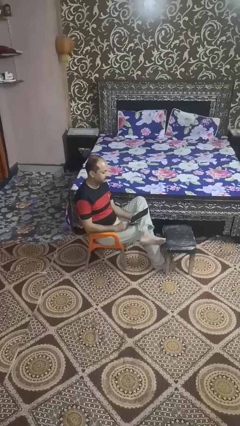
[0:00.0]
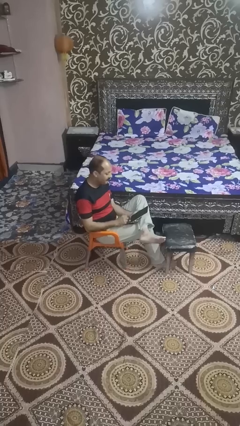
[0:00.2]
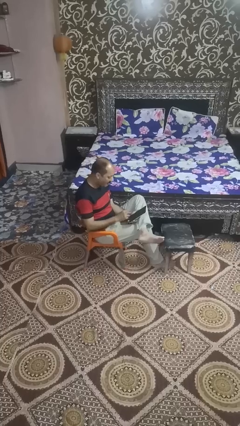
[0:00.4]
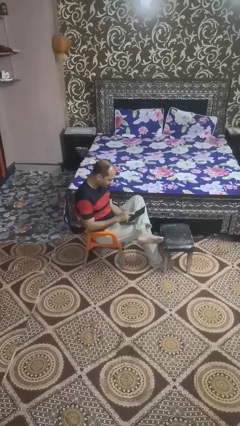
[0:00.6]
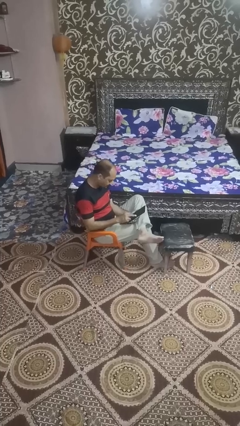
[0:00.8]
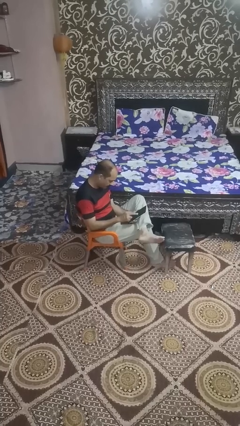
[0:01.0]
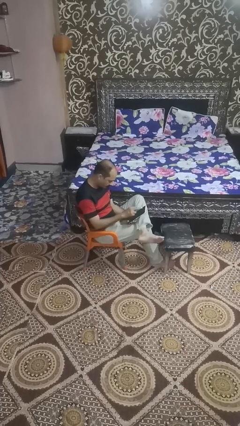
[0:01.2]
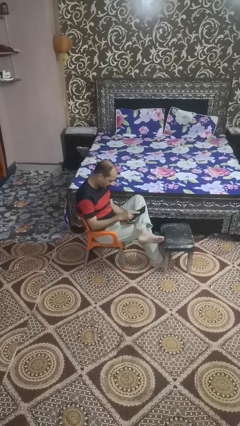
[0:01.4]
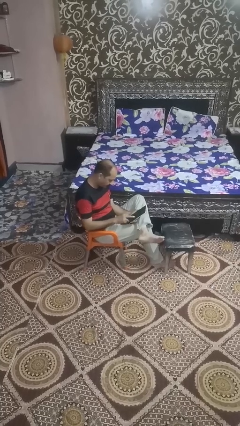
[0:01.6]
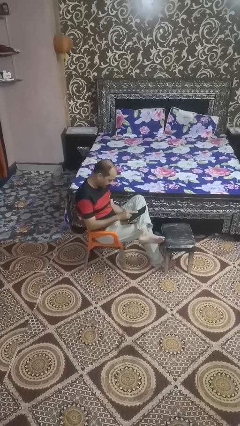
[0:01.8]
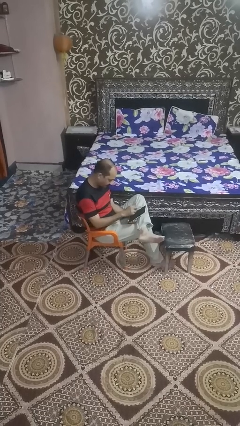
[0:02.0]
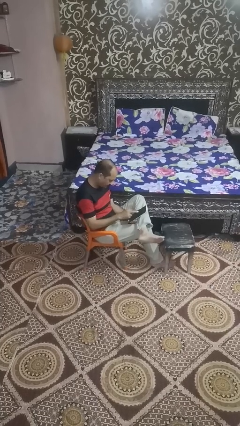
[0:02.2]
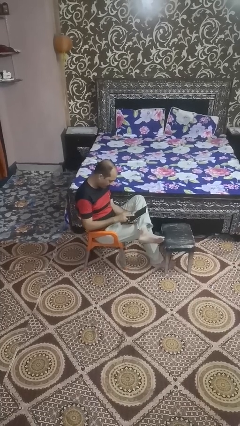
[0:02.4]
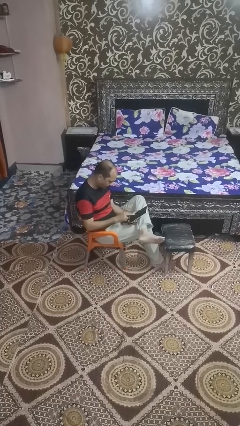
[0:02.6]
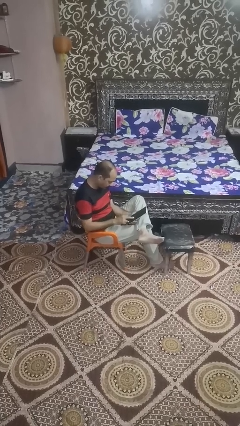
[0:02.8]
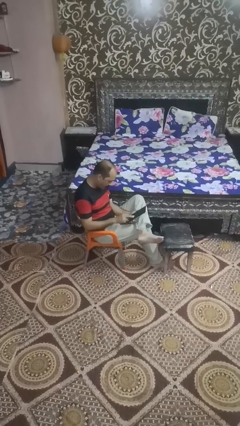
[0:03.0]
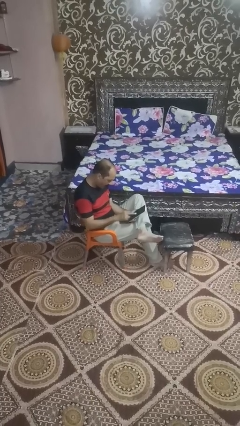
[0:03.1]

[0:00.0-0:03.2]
person interacts with tablet

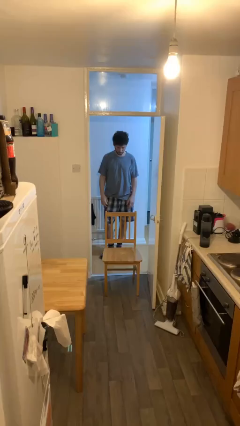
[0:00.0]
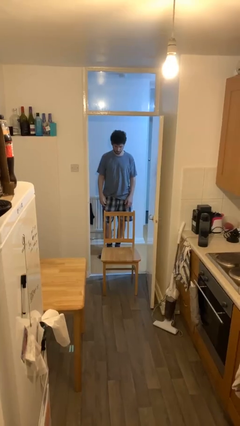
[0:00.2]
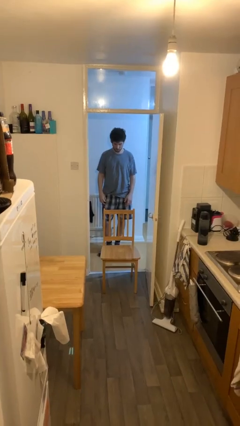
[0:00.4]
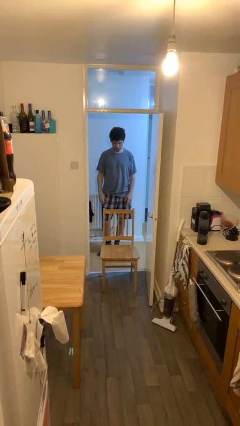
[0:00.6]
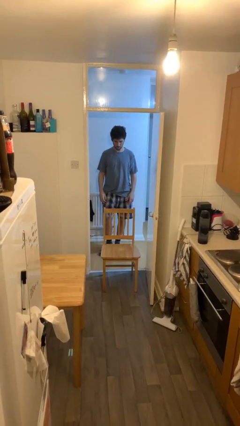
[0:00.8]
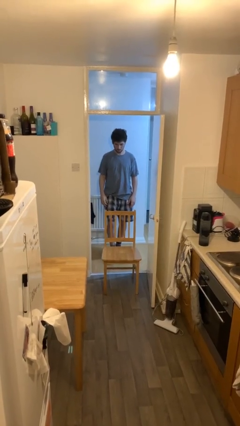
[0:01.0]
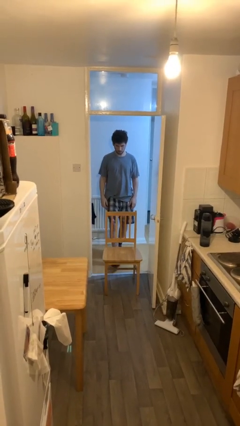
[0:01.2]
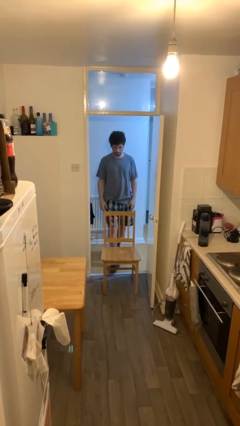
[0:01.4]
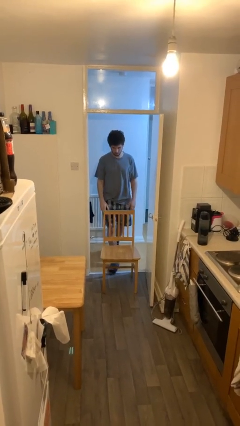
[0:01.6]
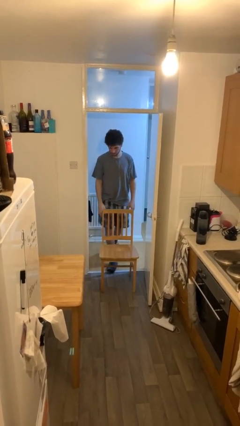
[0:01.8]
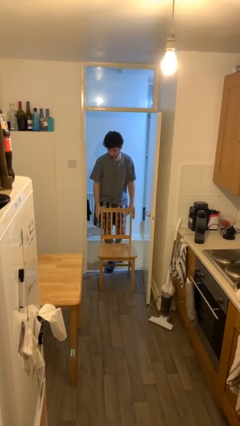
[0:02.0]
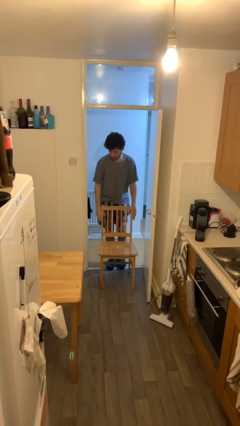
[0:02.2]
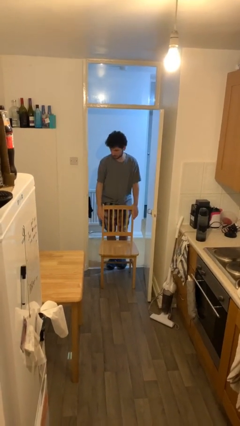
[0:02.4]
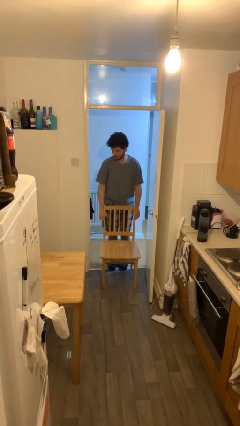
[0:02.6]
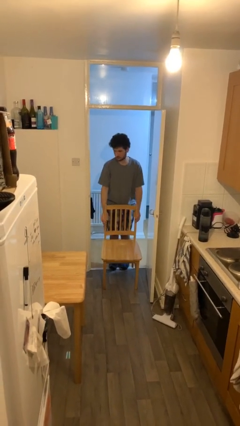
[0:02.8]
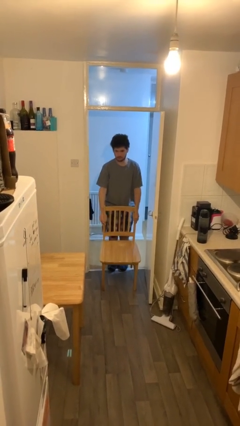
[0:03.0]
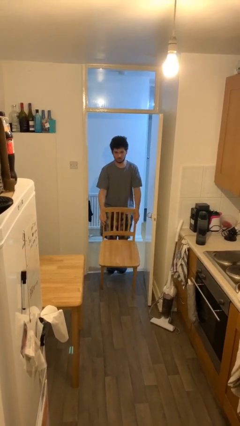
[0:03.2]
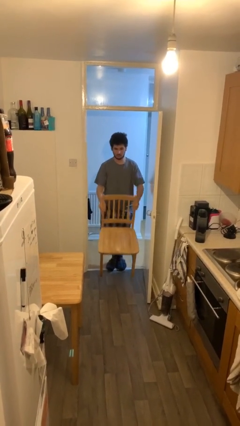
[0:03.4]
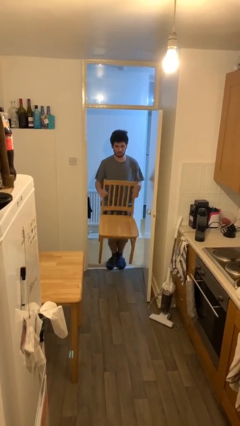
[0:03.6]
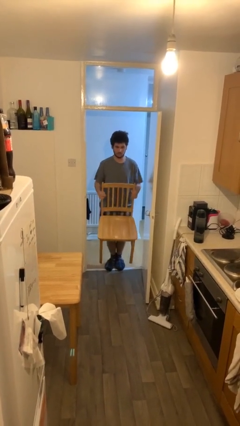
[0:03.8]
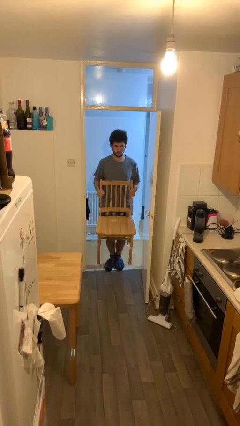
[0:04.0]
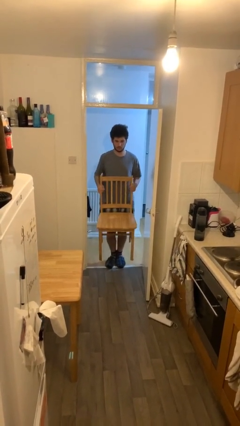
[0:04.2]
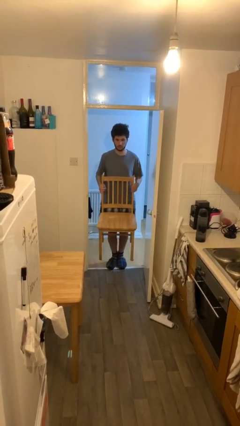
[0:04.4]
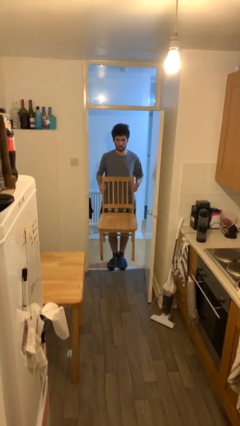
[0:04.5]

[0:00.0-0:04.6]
person picks up object from floor

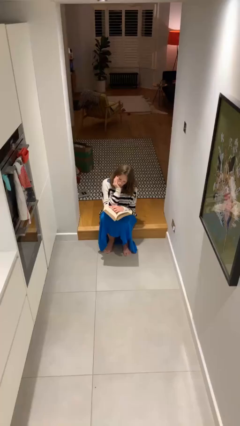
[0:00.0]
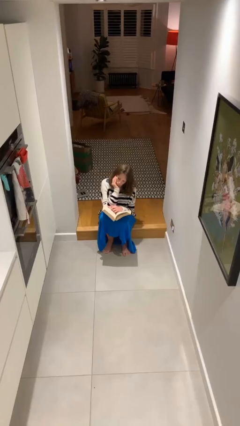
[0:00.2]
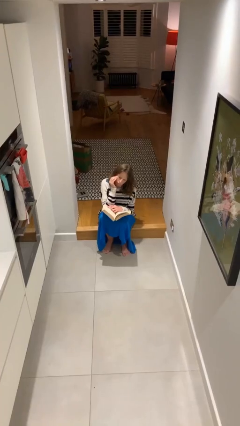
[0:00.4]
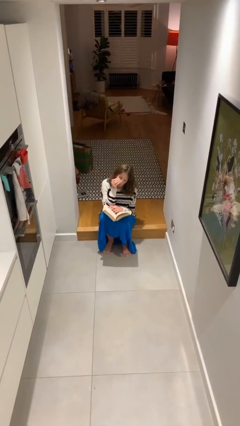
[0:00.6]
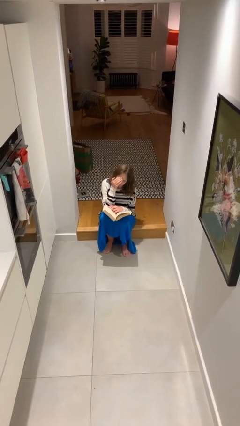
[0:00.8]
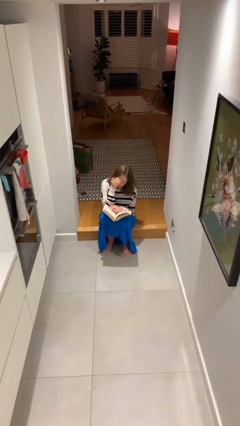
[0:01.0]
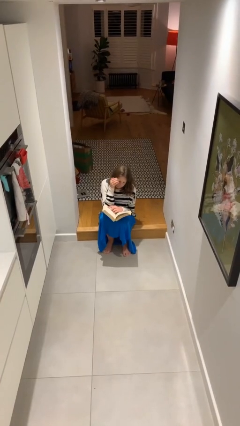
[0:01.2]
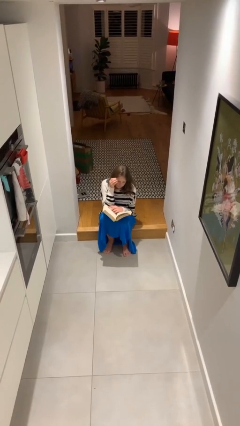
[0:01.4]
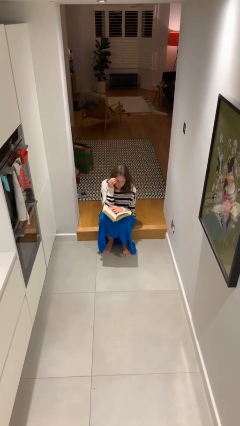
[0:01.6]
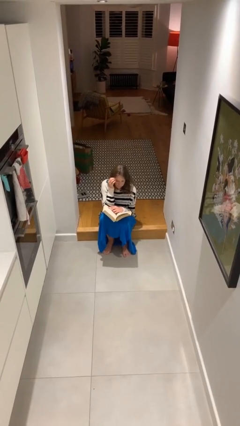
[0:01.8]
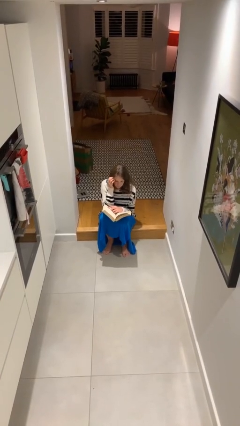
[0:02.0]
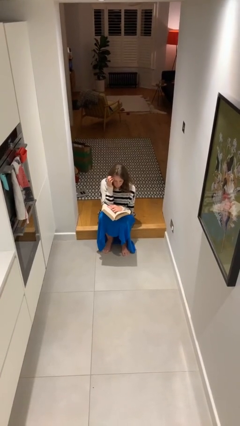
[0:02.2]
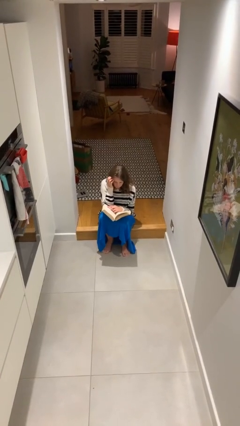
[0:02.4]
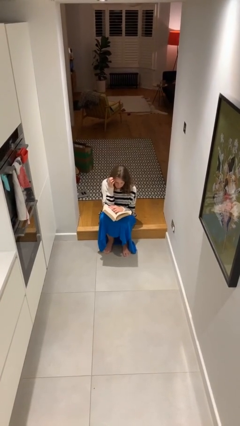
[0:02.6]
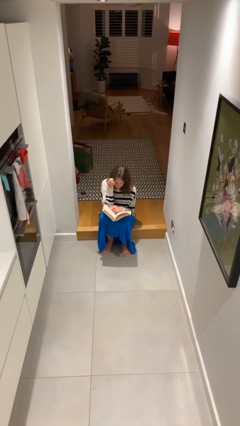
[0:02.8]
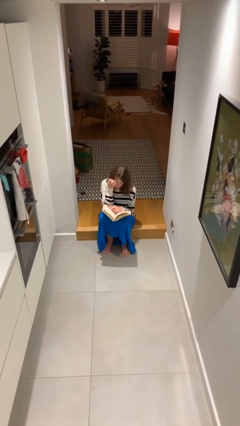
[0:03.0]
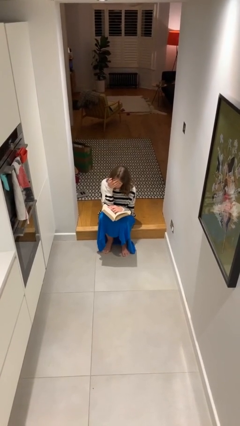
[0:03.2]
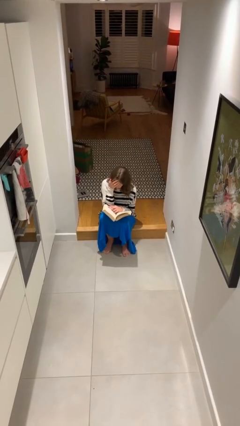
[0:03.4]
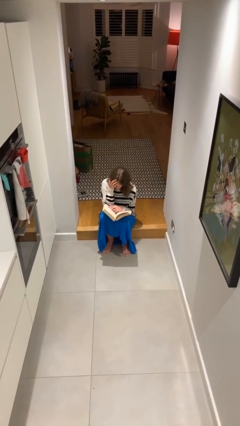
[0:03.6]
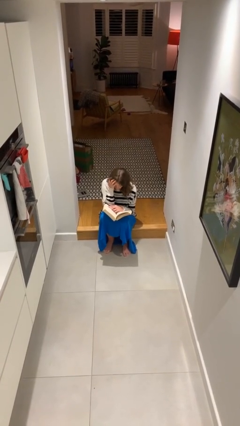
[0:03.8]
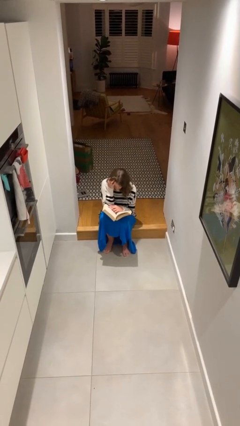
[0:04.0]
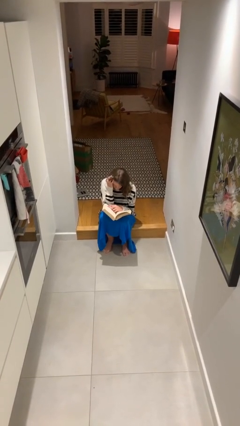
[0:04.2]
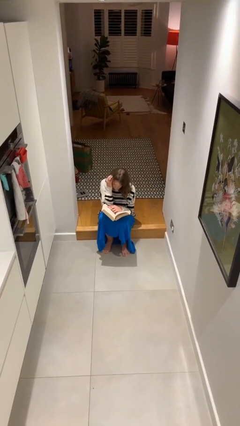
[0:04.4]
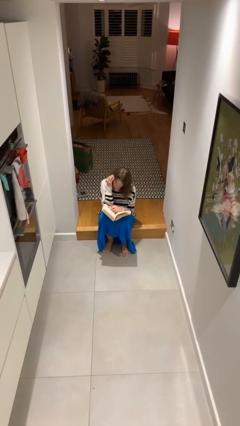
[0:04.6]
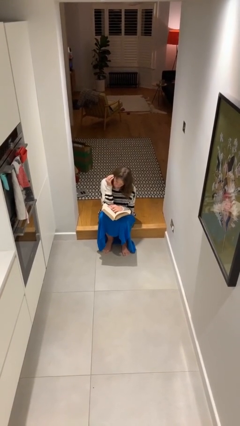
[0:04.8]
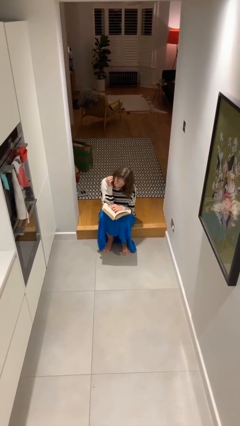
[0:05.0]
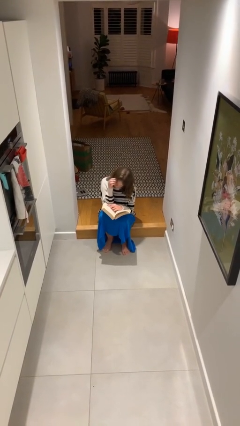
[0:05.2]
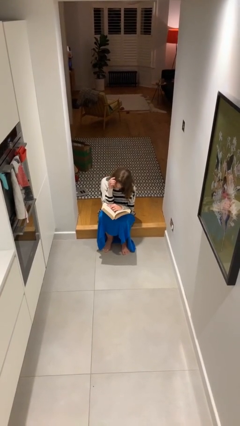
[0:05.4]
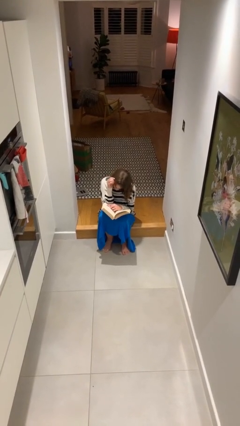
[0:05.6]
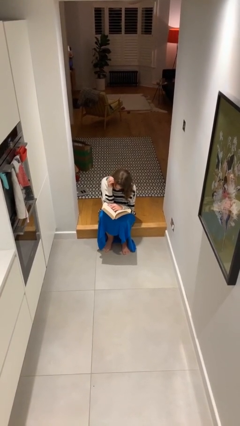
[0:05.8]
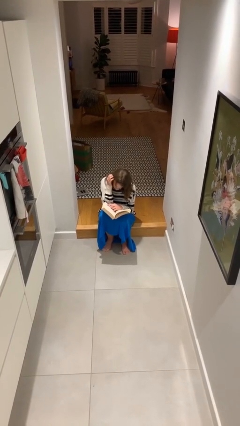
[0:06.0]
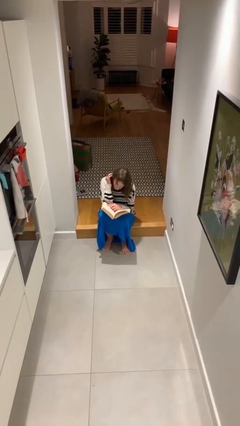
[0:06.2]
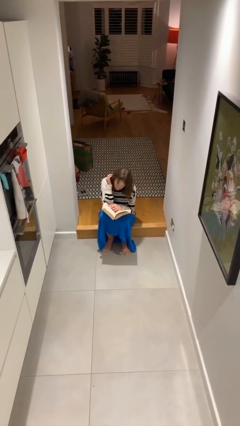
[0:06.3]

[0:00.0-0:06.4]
person reads document

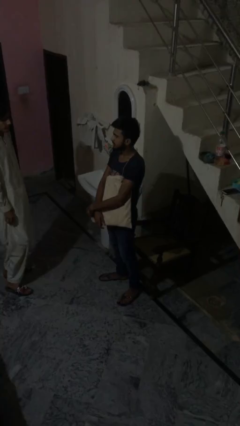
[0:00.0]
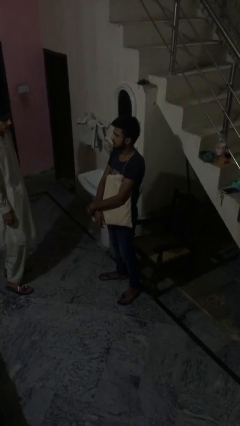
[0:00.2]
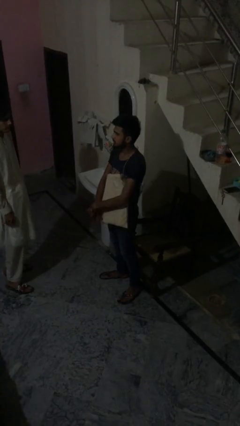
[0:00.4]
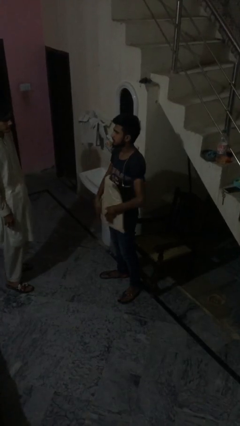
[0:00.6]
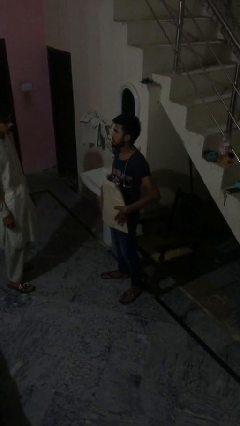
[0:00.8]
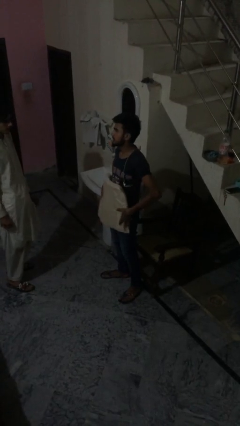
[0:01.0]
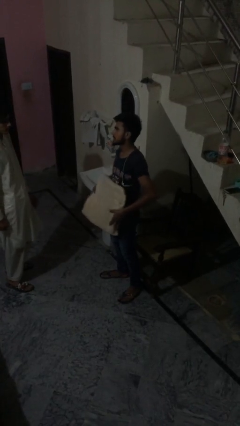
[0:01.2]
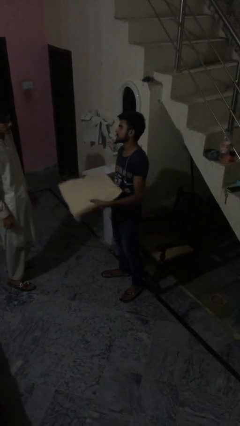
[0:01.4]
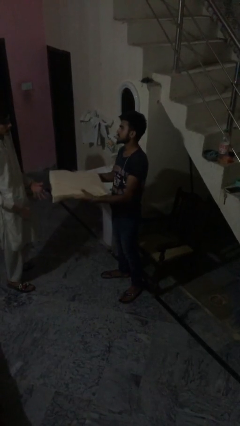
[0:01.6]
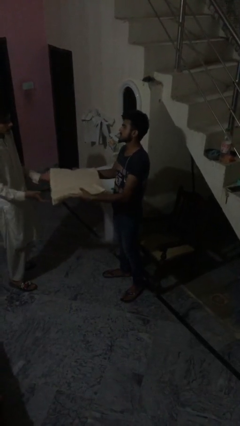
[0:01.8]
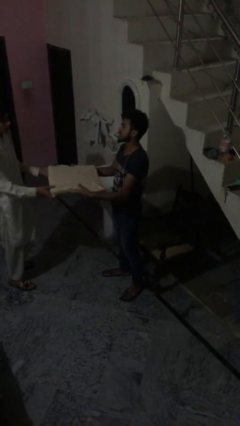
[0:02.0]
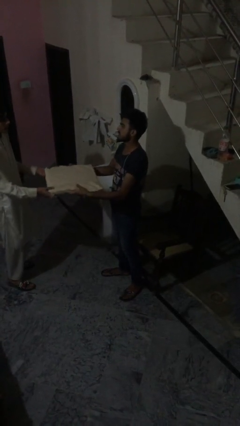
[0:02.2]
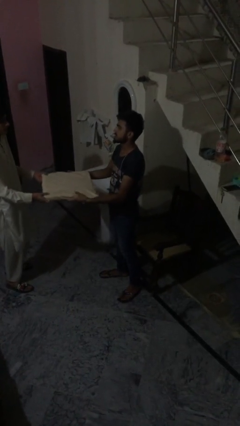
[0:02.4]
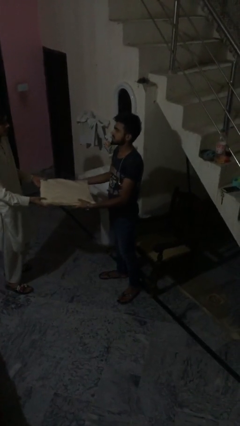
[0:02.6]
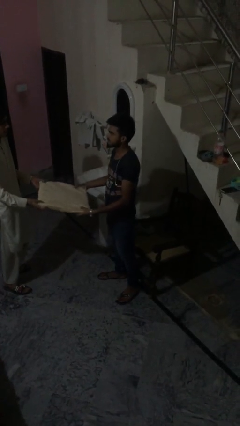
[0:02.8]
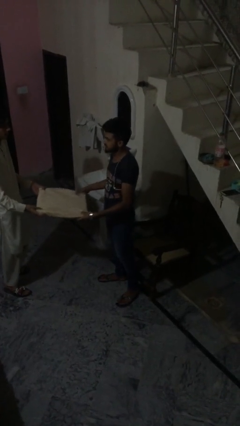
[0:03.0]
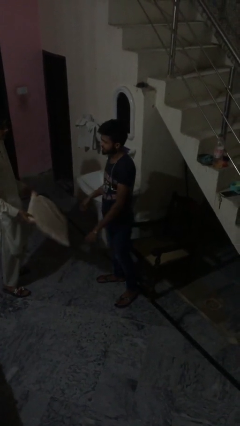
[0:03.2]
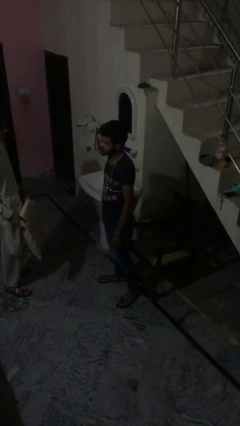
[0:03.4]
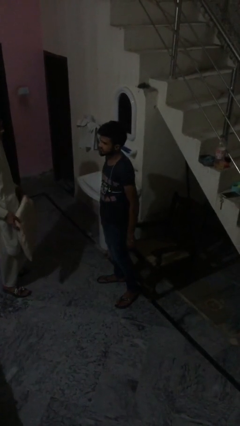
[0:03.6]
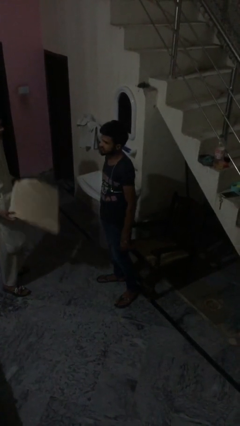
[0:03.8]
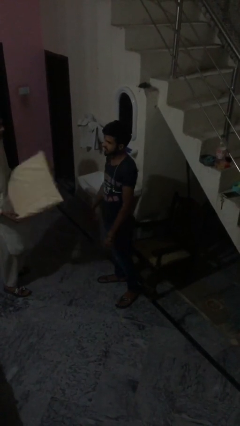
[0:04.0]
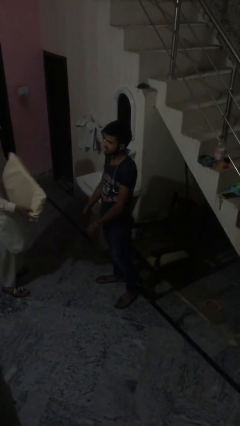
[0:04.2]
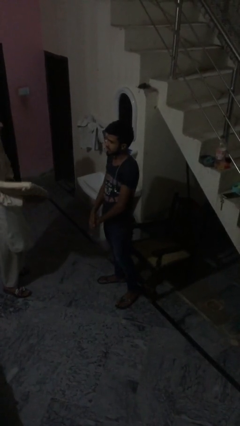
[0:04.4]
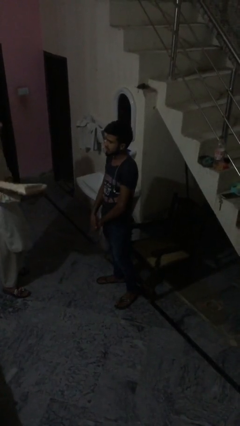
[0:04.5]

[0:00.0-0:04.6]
person transfers object to person
